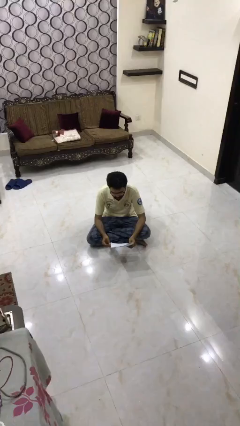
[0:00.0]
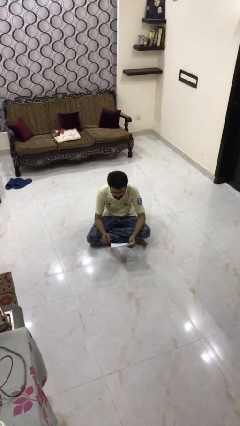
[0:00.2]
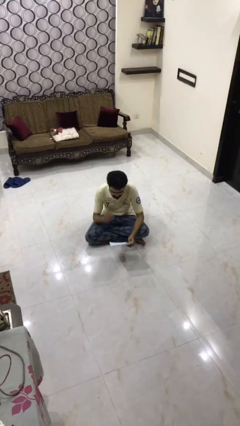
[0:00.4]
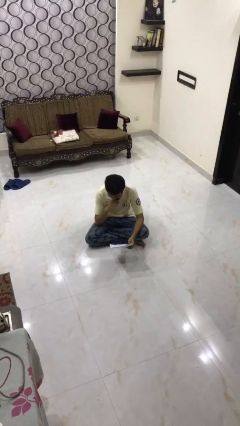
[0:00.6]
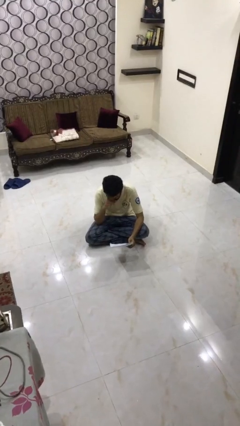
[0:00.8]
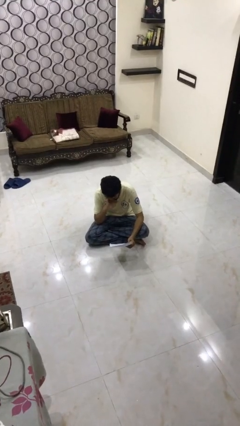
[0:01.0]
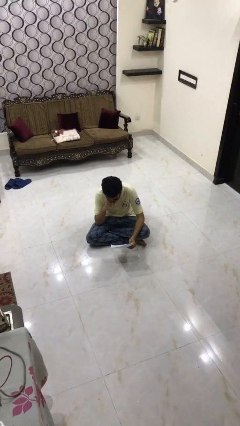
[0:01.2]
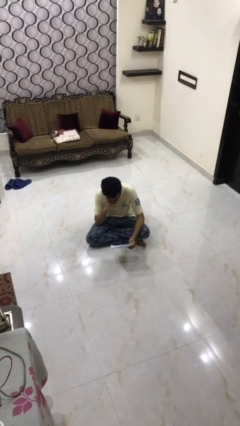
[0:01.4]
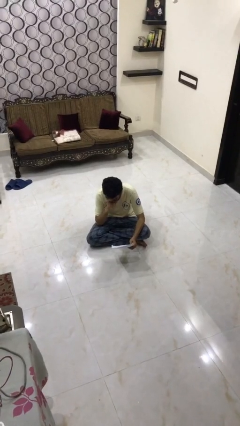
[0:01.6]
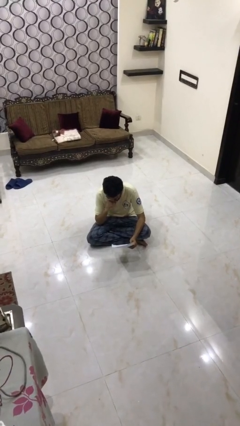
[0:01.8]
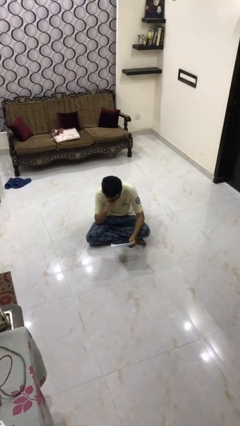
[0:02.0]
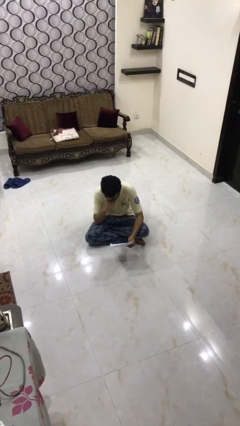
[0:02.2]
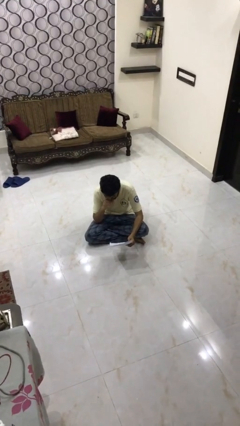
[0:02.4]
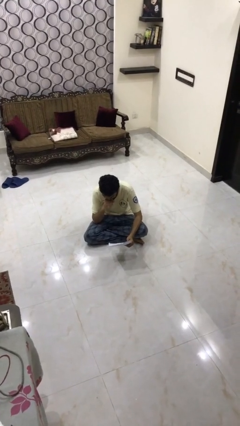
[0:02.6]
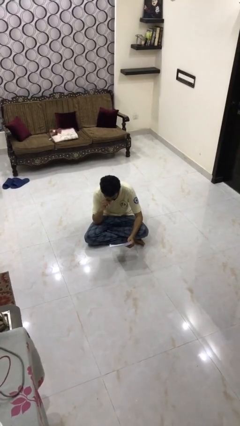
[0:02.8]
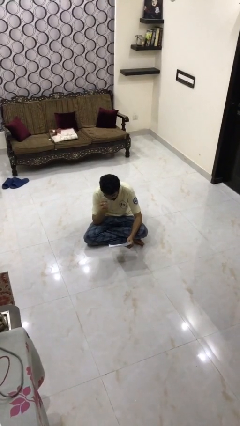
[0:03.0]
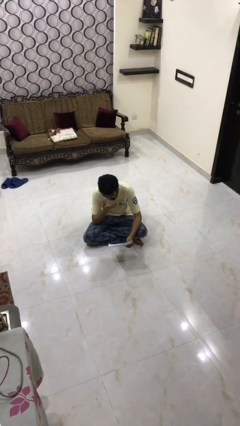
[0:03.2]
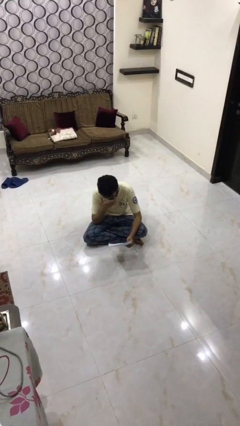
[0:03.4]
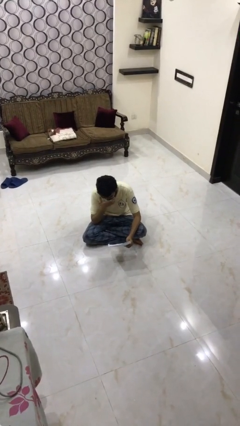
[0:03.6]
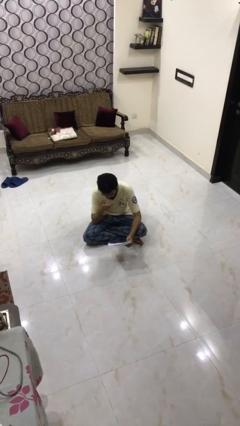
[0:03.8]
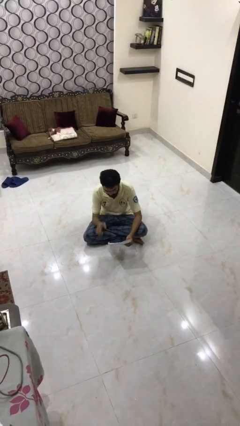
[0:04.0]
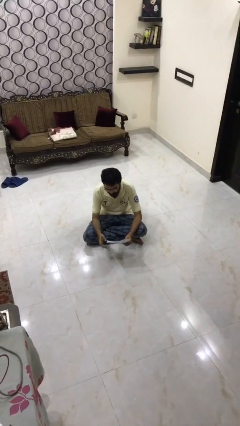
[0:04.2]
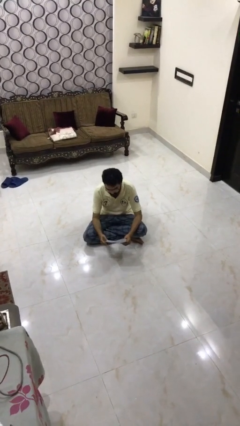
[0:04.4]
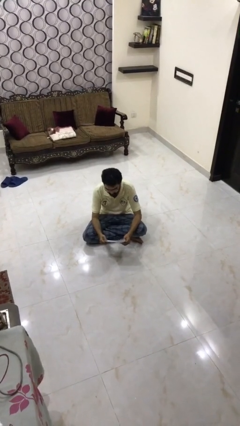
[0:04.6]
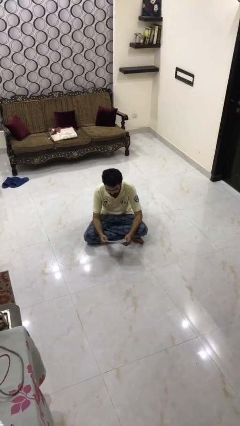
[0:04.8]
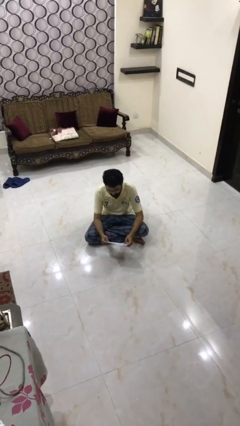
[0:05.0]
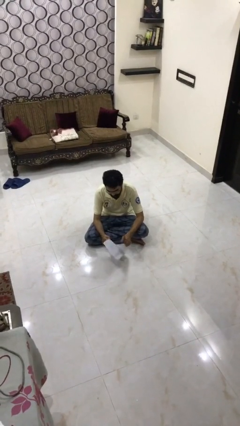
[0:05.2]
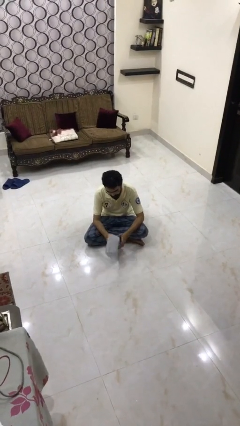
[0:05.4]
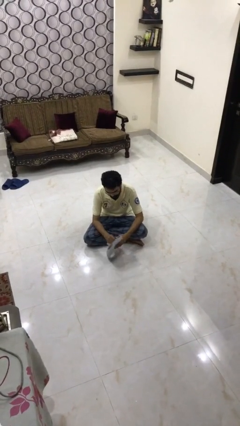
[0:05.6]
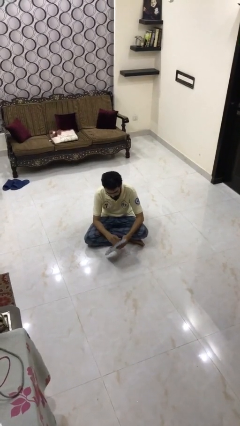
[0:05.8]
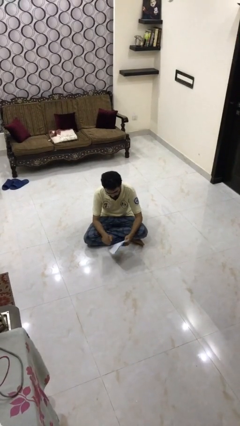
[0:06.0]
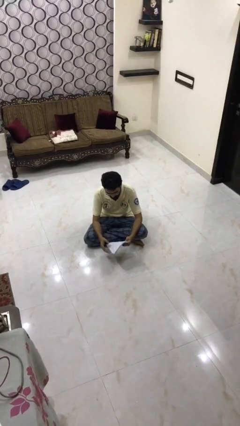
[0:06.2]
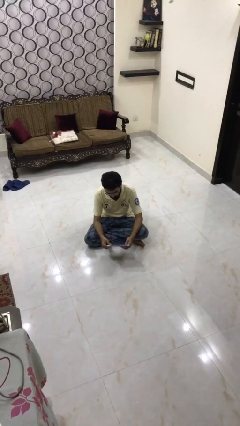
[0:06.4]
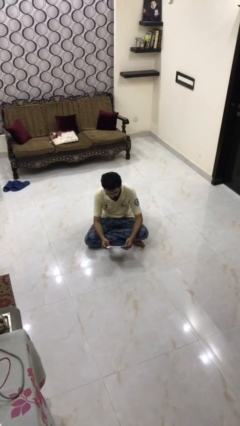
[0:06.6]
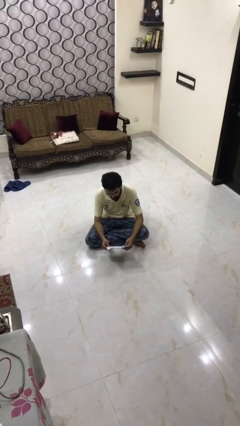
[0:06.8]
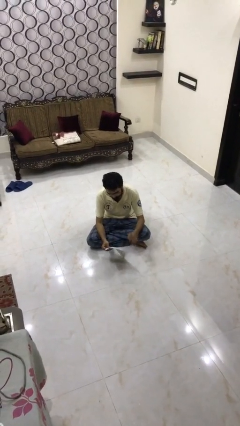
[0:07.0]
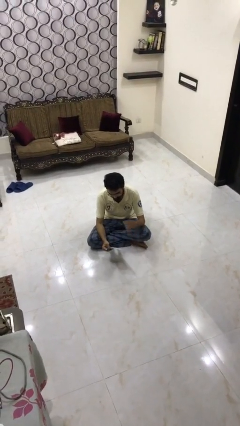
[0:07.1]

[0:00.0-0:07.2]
person reads document

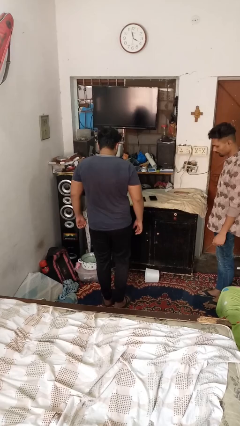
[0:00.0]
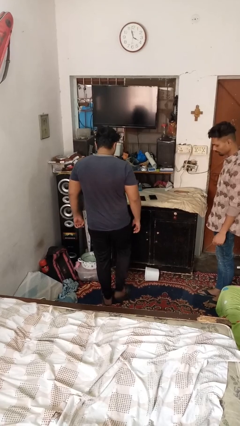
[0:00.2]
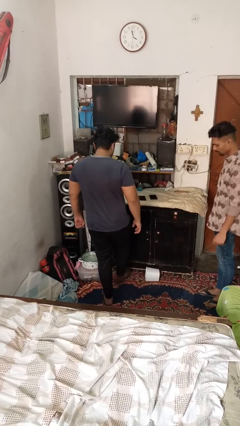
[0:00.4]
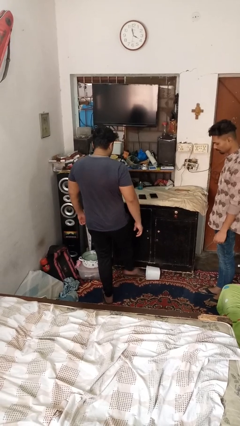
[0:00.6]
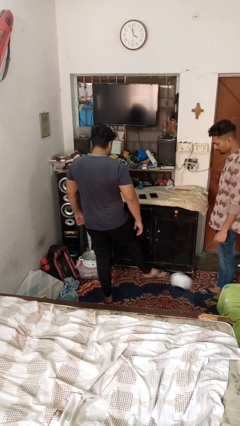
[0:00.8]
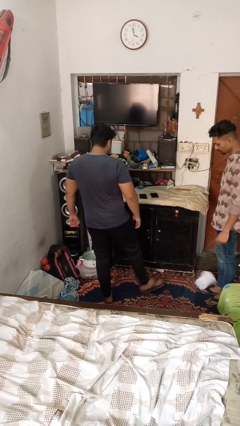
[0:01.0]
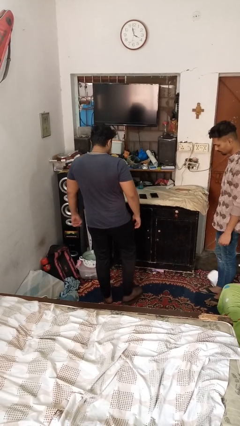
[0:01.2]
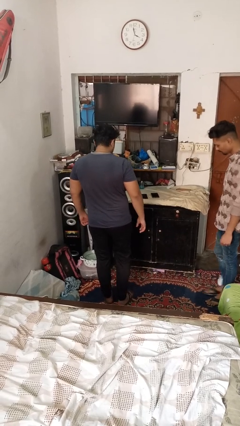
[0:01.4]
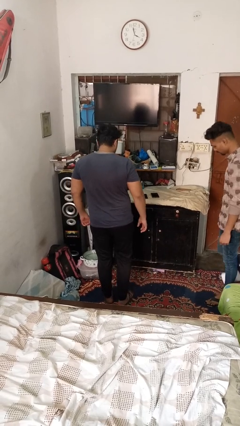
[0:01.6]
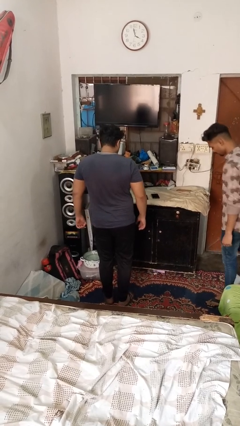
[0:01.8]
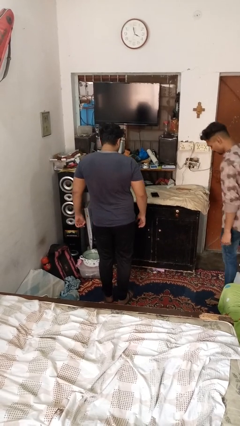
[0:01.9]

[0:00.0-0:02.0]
person kicks object to person

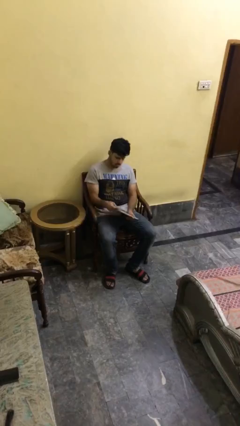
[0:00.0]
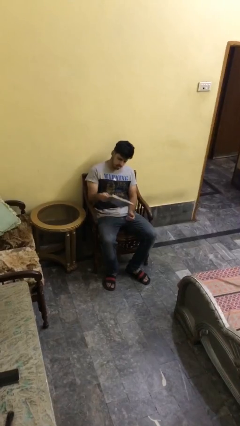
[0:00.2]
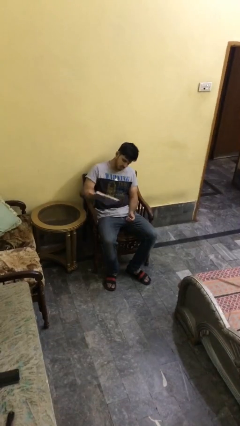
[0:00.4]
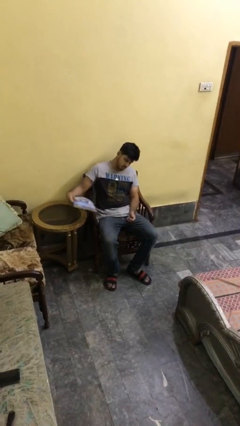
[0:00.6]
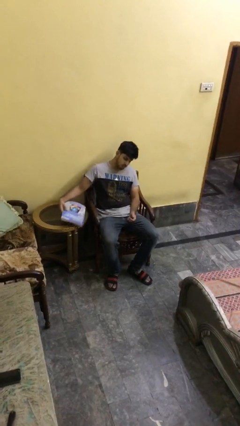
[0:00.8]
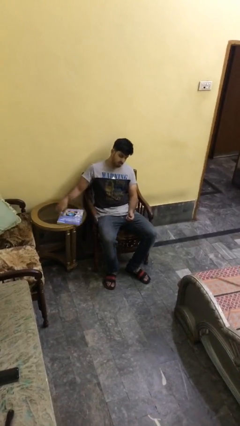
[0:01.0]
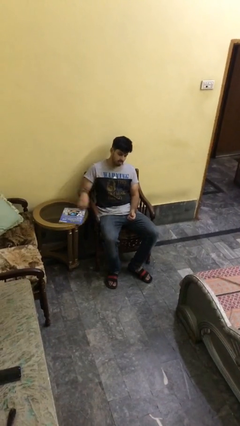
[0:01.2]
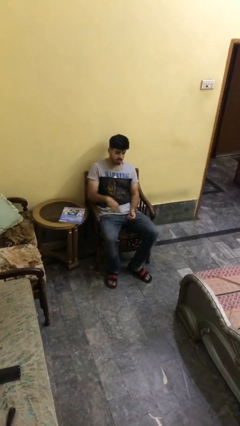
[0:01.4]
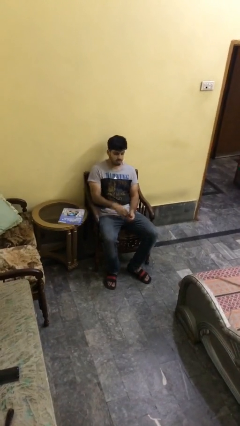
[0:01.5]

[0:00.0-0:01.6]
person puts down object on table

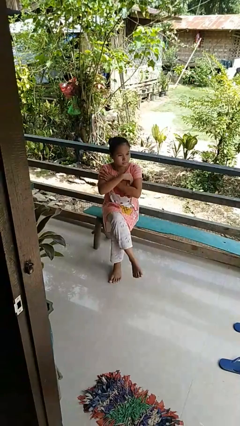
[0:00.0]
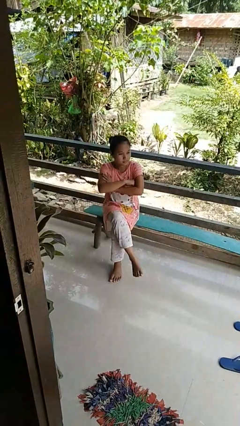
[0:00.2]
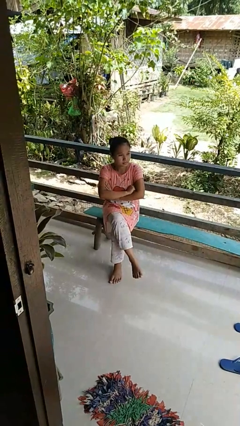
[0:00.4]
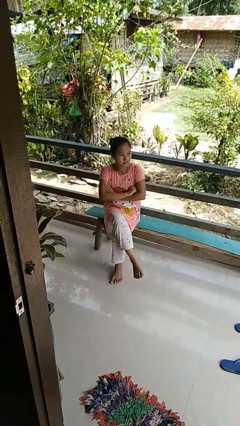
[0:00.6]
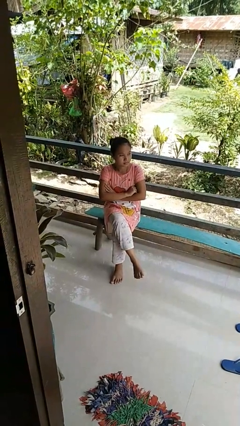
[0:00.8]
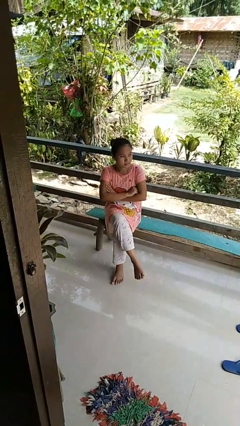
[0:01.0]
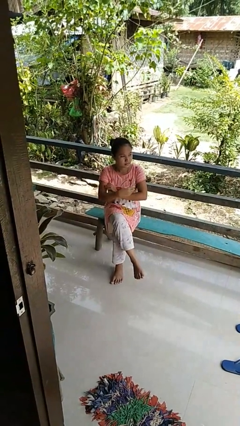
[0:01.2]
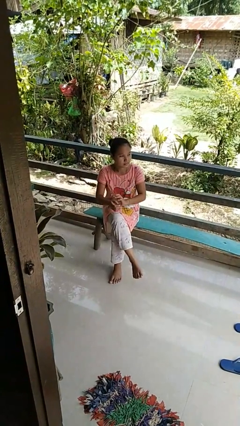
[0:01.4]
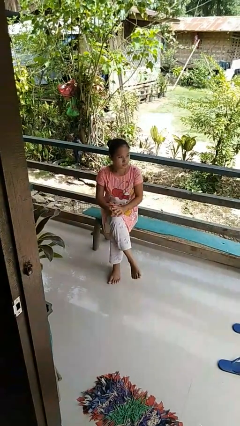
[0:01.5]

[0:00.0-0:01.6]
person crosses arms

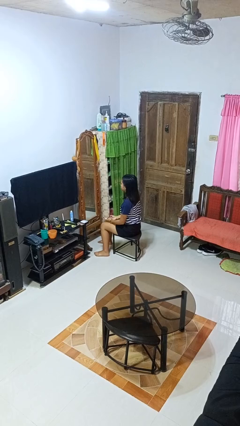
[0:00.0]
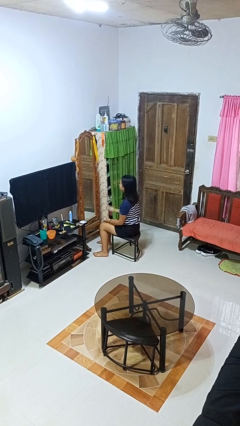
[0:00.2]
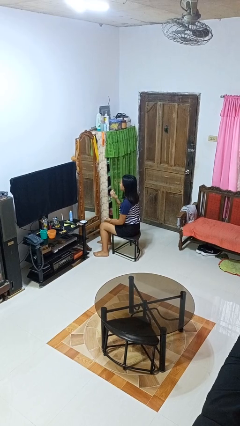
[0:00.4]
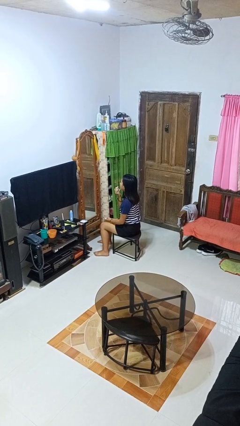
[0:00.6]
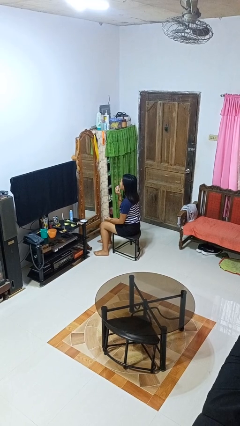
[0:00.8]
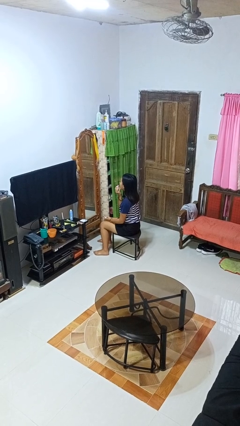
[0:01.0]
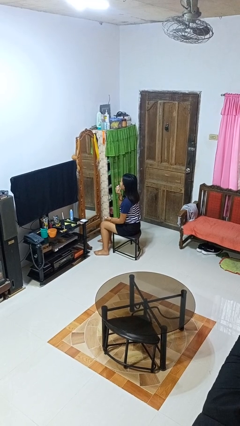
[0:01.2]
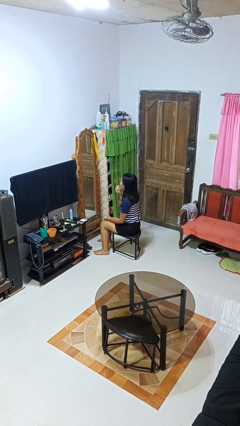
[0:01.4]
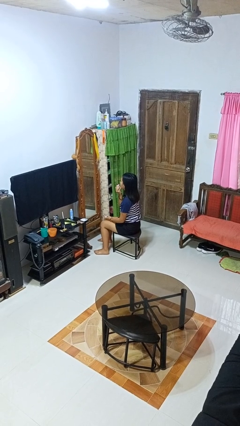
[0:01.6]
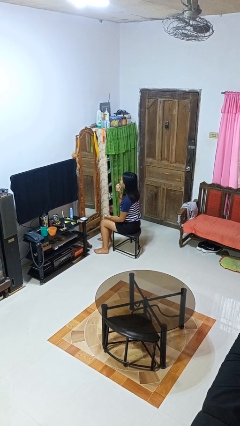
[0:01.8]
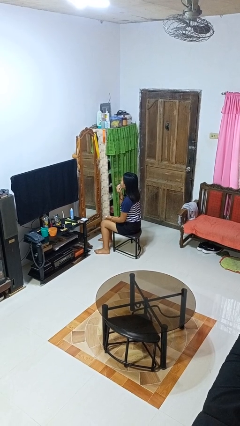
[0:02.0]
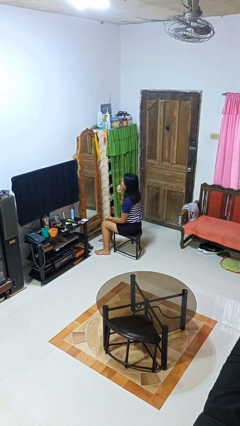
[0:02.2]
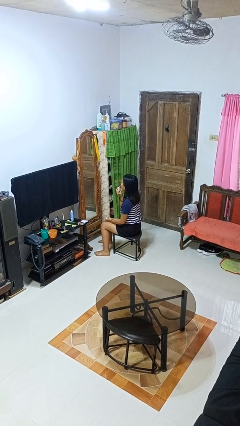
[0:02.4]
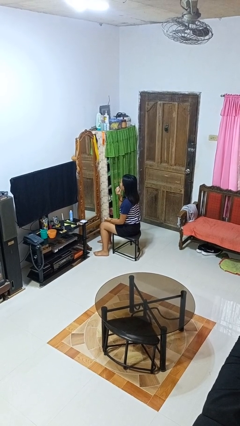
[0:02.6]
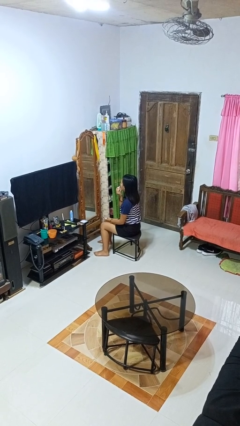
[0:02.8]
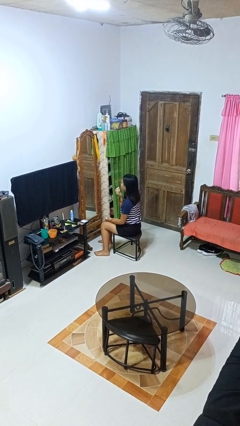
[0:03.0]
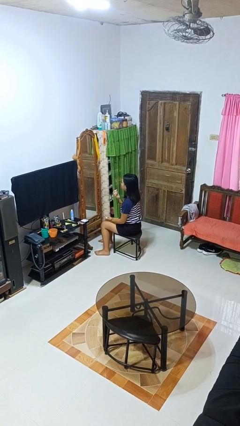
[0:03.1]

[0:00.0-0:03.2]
person applies lip makeup

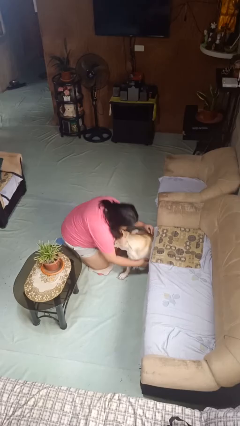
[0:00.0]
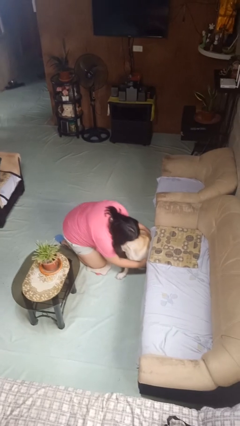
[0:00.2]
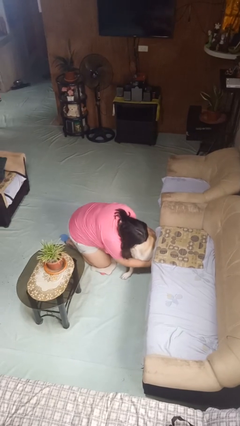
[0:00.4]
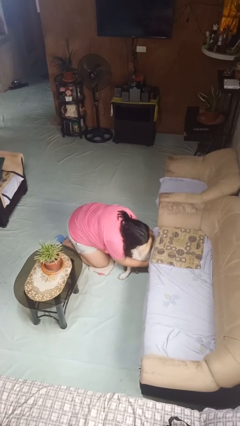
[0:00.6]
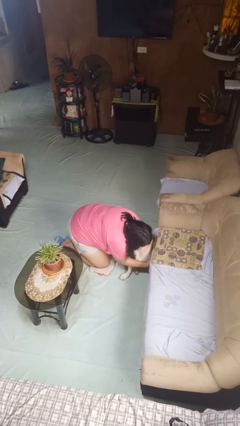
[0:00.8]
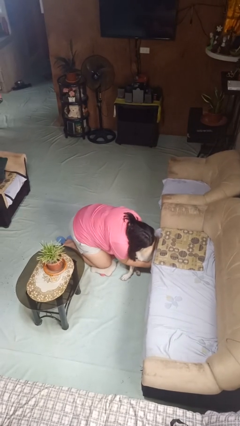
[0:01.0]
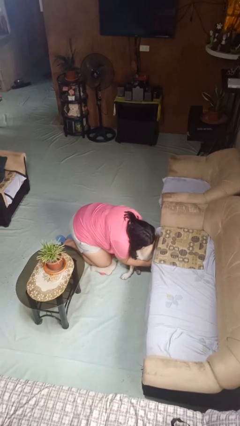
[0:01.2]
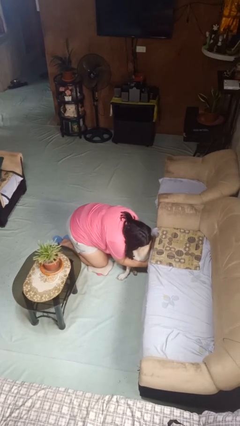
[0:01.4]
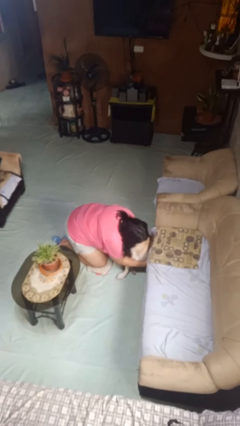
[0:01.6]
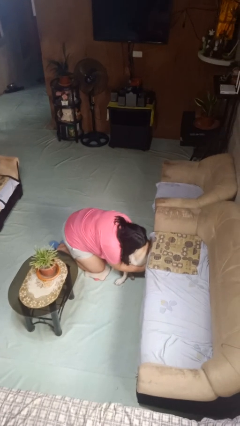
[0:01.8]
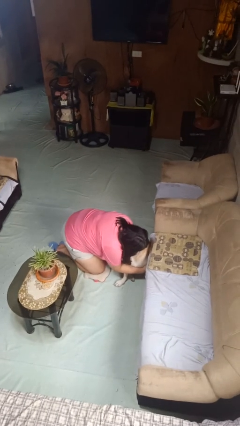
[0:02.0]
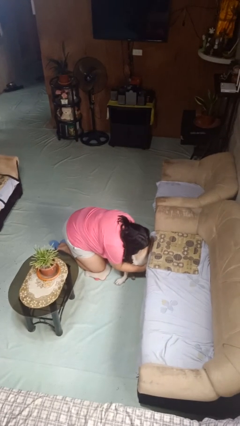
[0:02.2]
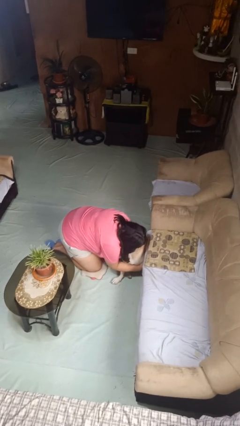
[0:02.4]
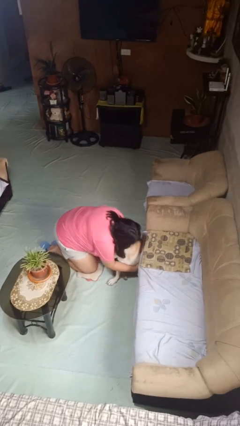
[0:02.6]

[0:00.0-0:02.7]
person hugs dog
